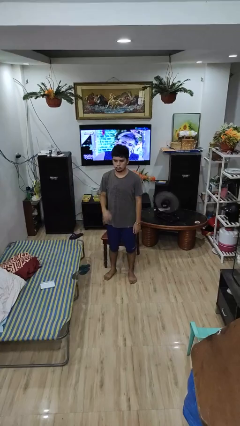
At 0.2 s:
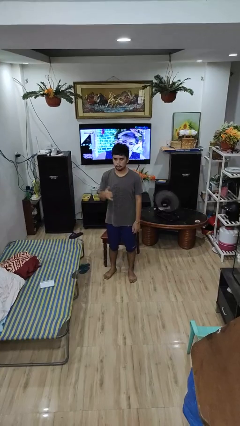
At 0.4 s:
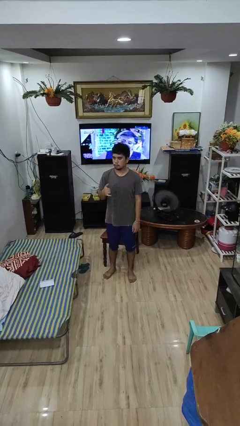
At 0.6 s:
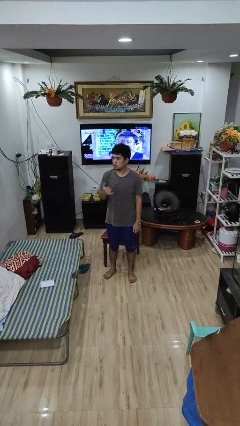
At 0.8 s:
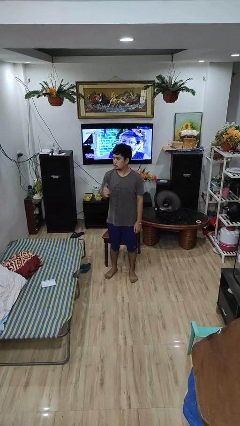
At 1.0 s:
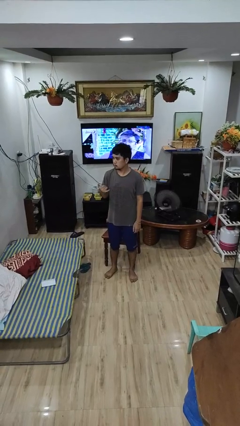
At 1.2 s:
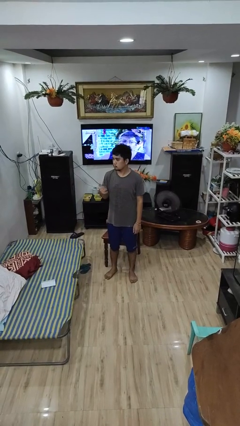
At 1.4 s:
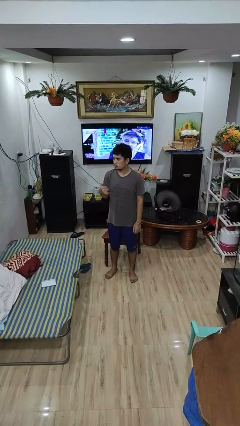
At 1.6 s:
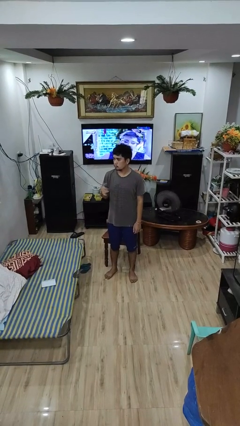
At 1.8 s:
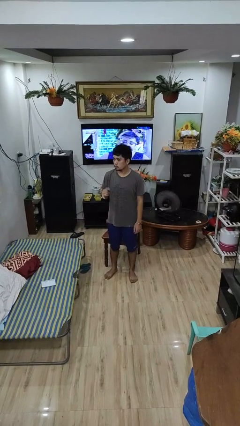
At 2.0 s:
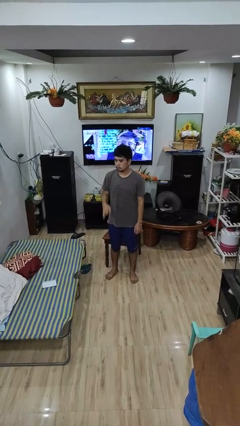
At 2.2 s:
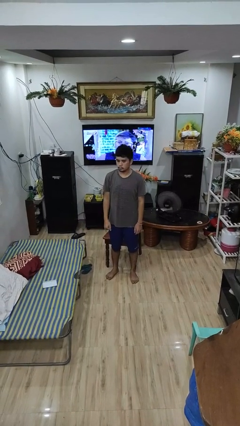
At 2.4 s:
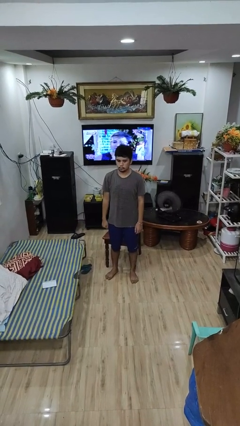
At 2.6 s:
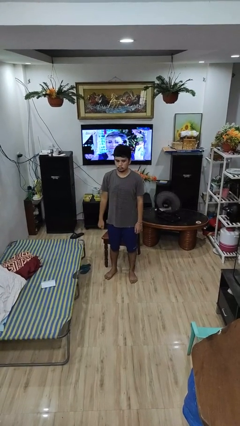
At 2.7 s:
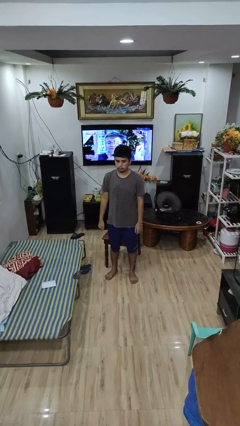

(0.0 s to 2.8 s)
person gestures hang loose

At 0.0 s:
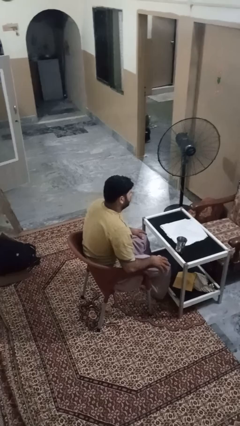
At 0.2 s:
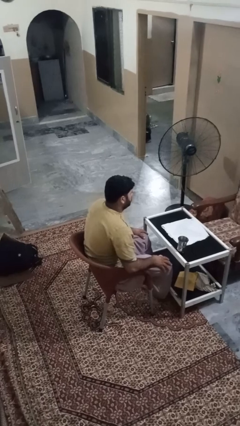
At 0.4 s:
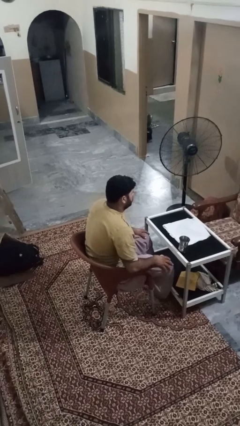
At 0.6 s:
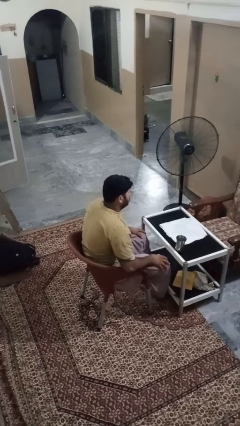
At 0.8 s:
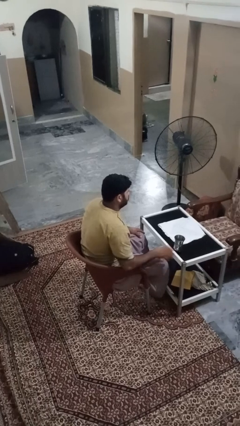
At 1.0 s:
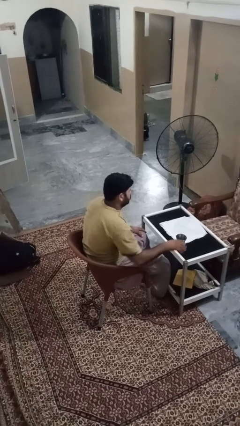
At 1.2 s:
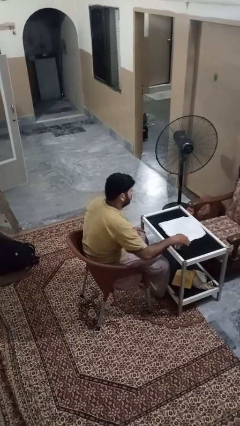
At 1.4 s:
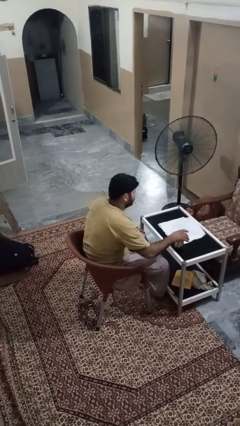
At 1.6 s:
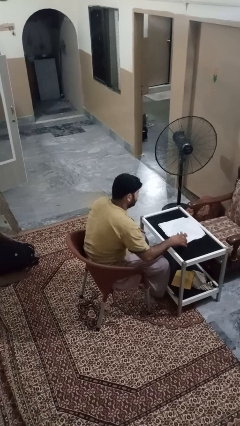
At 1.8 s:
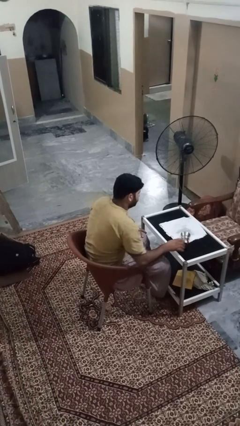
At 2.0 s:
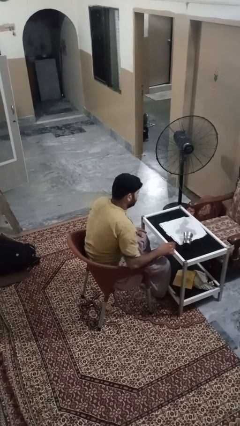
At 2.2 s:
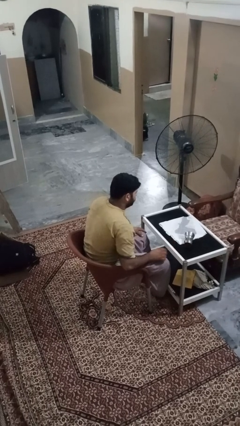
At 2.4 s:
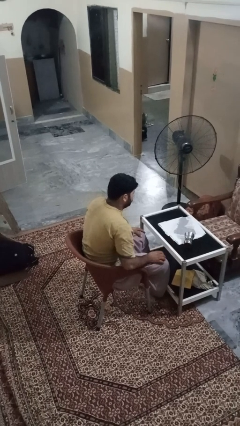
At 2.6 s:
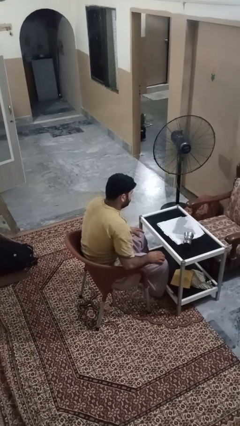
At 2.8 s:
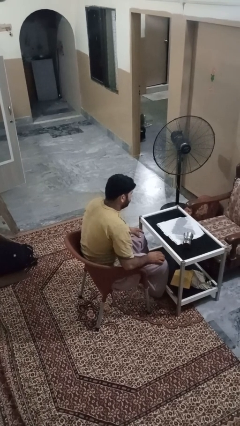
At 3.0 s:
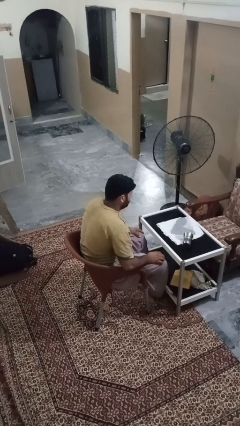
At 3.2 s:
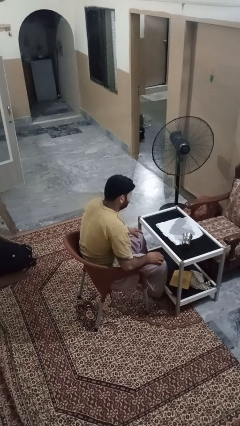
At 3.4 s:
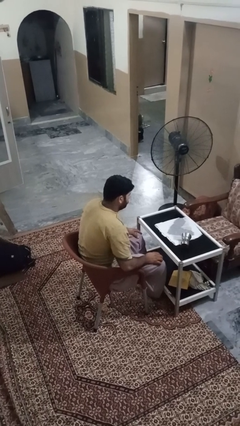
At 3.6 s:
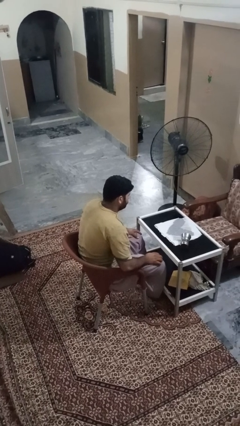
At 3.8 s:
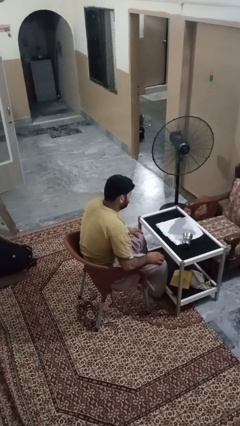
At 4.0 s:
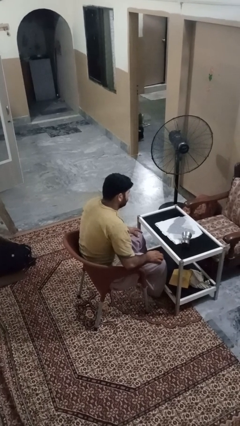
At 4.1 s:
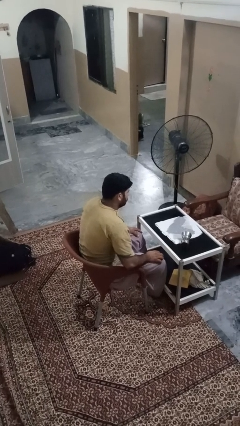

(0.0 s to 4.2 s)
person spills on table

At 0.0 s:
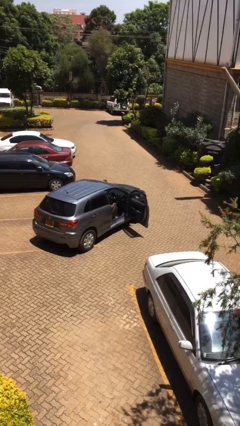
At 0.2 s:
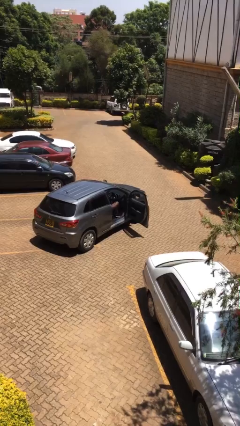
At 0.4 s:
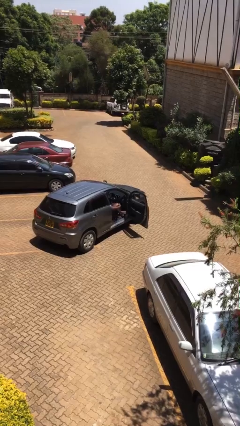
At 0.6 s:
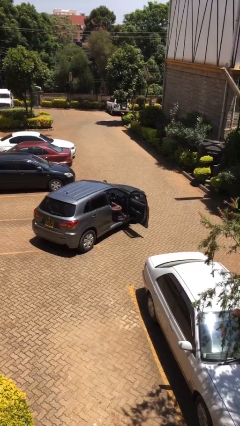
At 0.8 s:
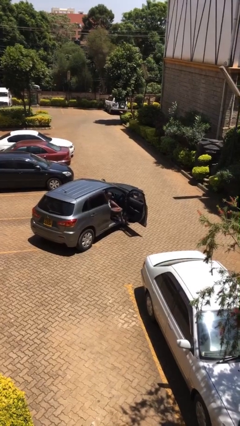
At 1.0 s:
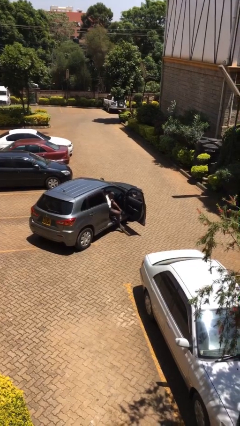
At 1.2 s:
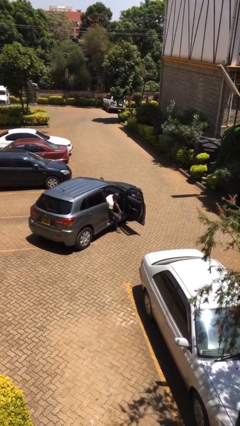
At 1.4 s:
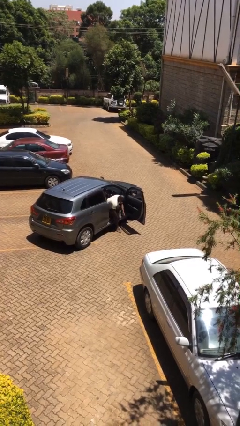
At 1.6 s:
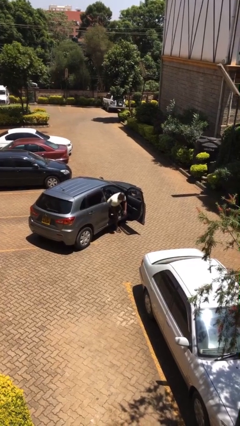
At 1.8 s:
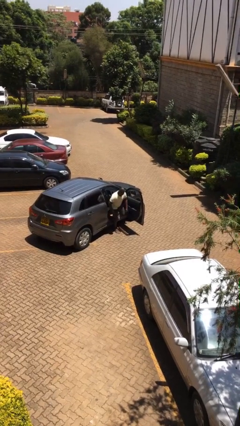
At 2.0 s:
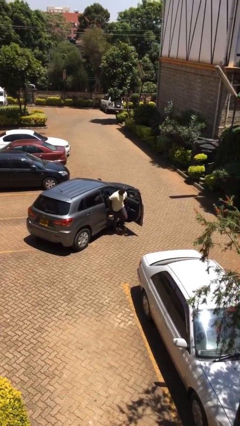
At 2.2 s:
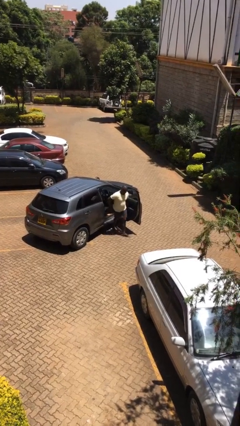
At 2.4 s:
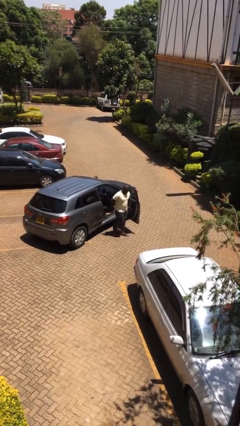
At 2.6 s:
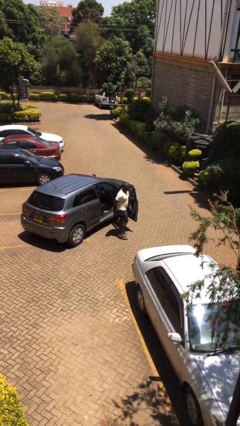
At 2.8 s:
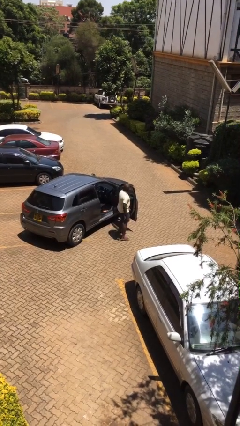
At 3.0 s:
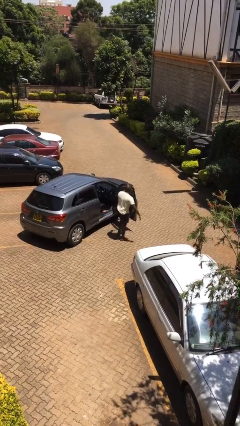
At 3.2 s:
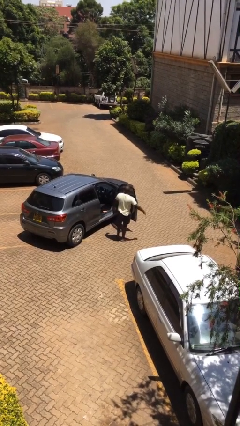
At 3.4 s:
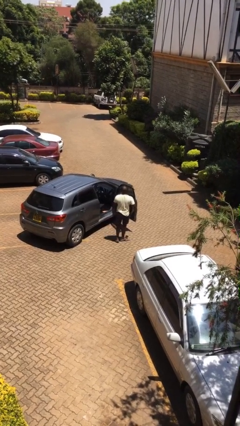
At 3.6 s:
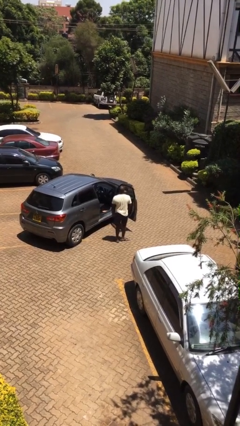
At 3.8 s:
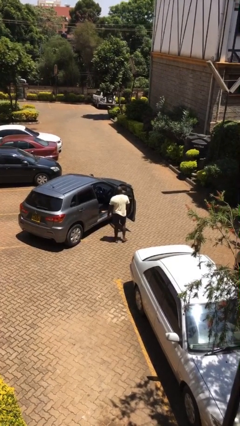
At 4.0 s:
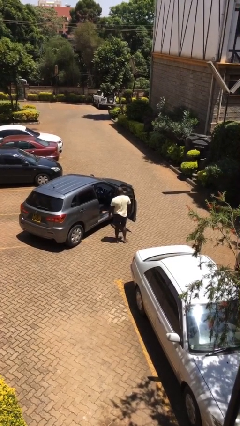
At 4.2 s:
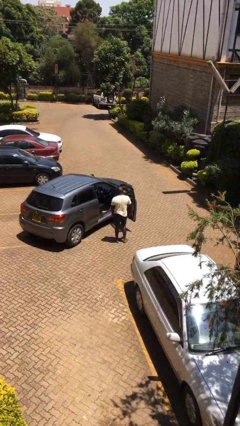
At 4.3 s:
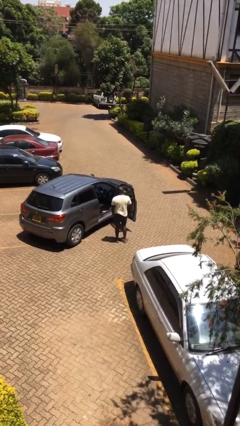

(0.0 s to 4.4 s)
person exits car

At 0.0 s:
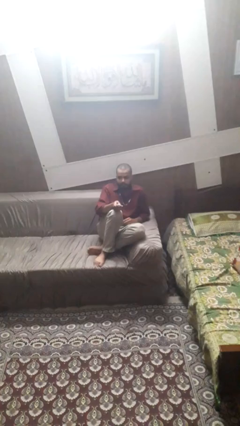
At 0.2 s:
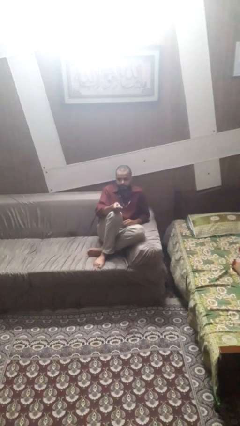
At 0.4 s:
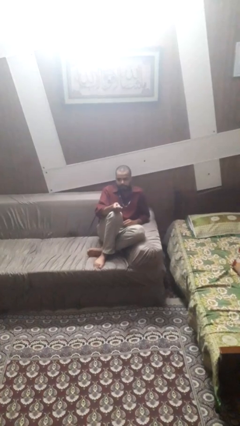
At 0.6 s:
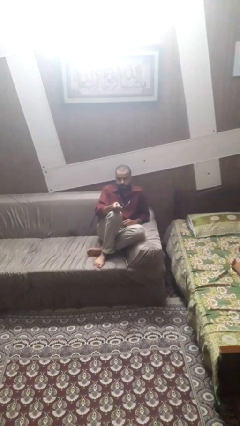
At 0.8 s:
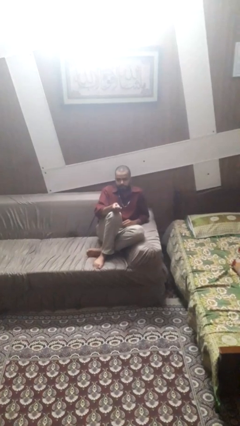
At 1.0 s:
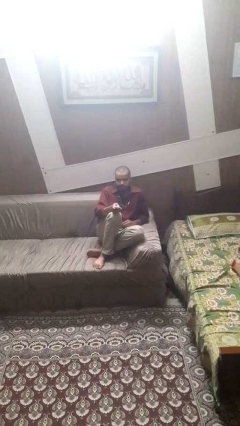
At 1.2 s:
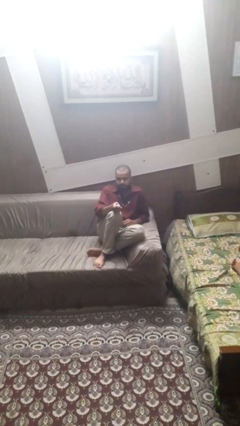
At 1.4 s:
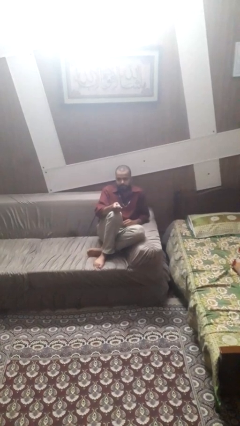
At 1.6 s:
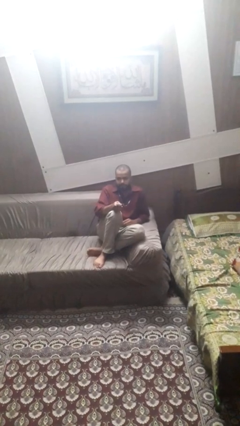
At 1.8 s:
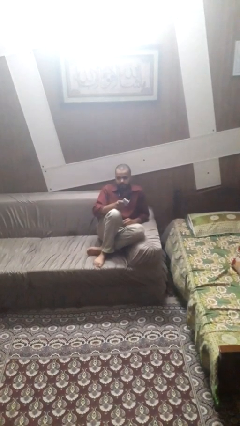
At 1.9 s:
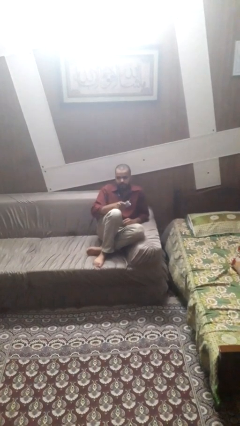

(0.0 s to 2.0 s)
person uses television remote

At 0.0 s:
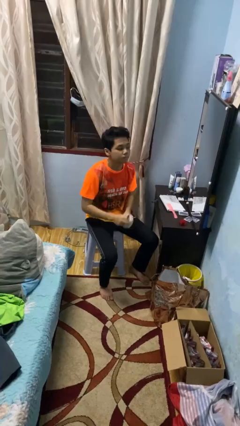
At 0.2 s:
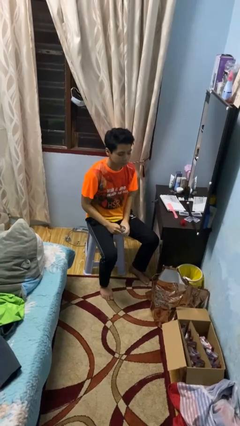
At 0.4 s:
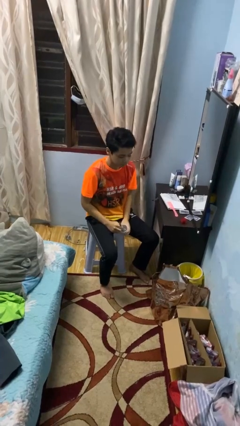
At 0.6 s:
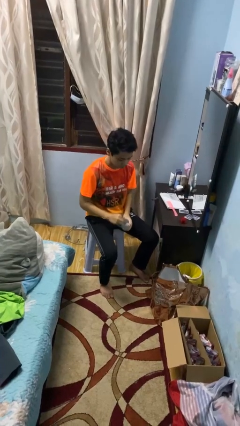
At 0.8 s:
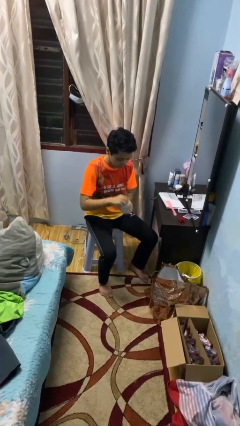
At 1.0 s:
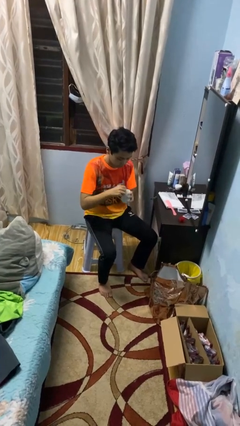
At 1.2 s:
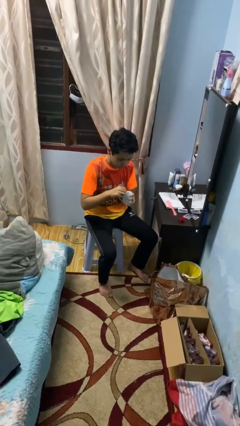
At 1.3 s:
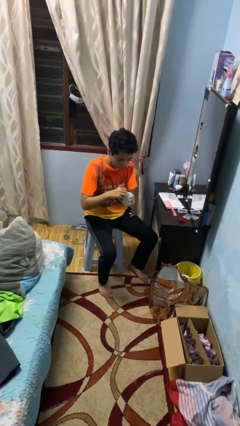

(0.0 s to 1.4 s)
person stirs mug

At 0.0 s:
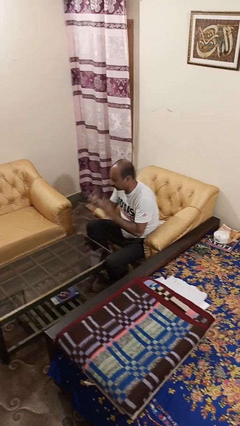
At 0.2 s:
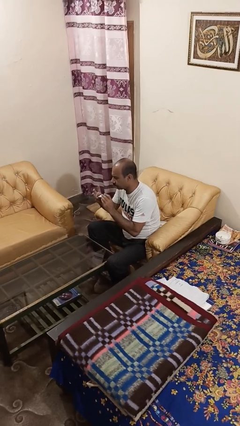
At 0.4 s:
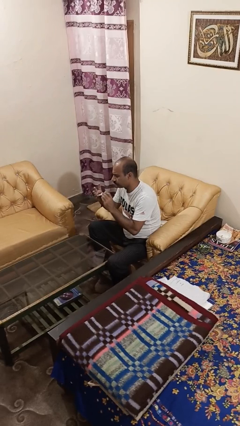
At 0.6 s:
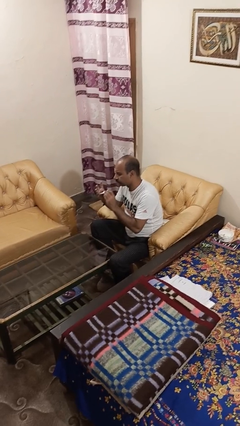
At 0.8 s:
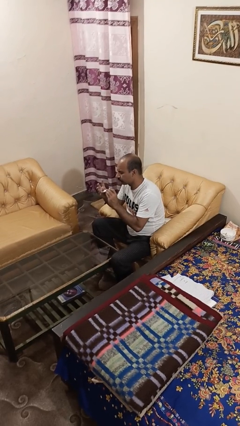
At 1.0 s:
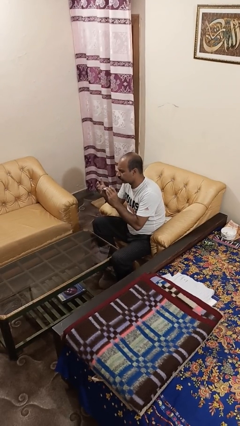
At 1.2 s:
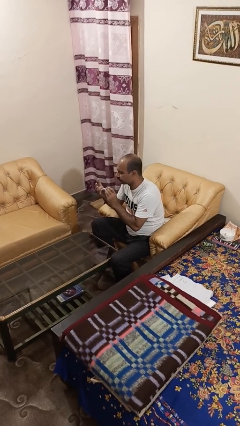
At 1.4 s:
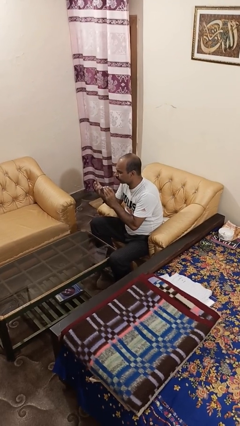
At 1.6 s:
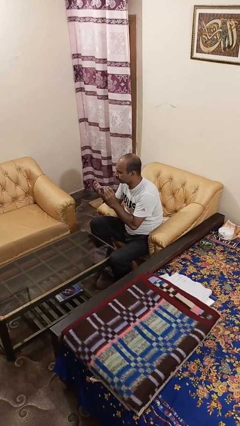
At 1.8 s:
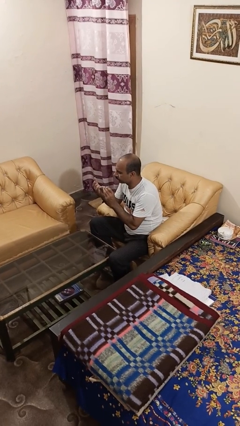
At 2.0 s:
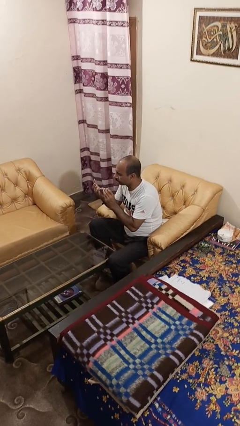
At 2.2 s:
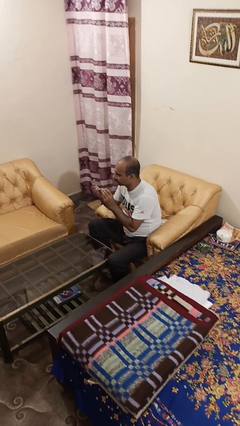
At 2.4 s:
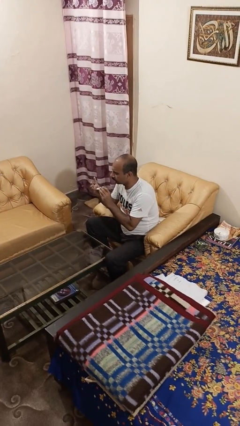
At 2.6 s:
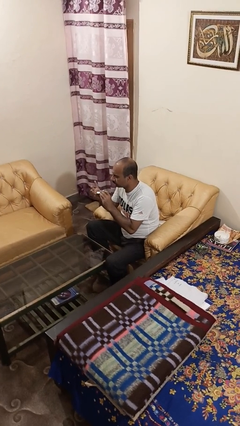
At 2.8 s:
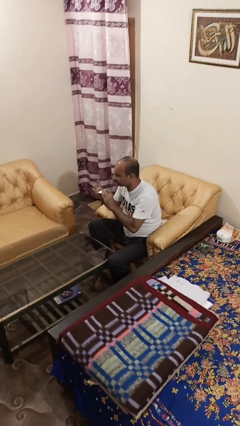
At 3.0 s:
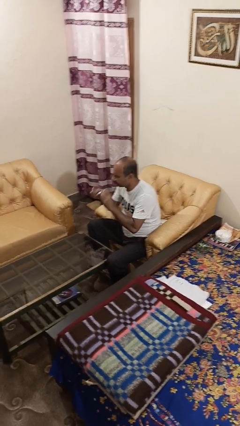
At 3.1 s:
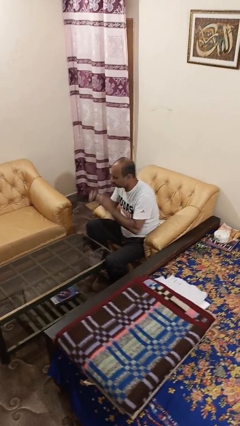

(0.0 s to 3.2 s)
person clips fingernails
